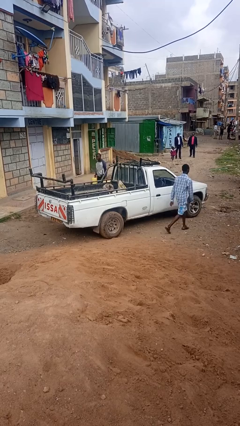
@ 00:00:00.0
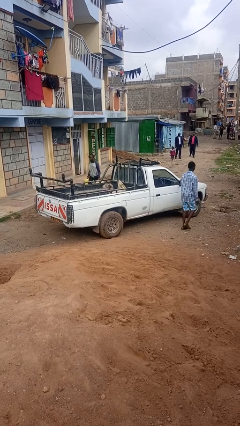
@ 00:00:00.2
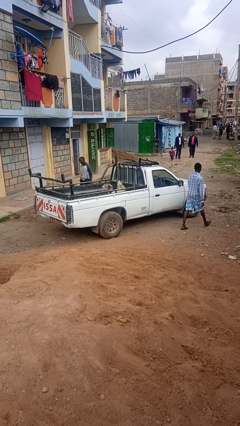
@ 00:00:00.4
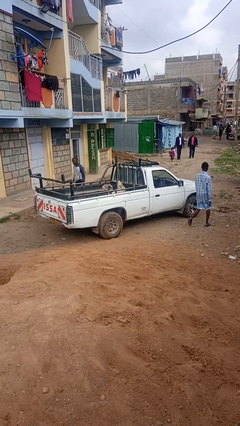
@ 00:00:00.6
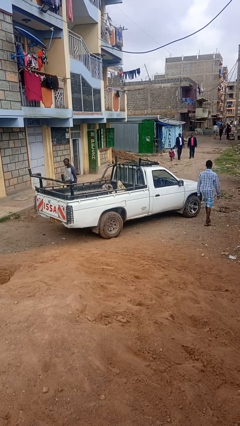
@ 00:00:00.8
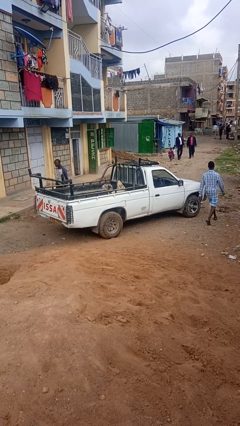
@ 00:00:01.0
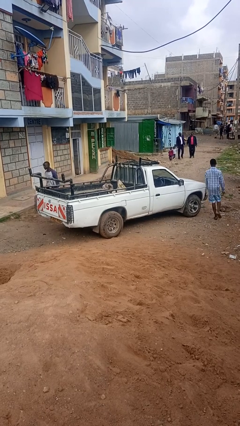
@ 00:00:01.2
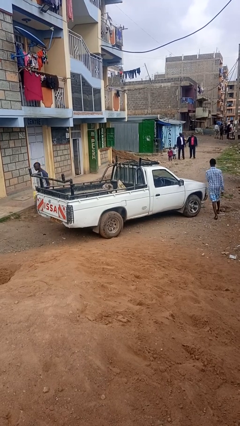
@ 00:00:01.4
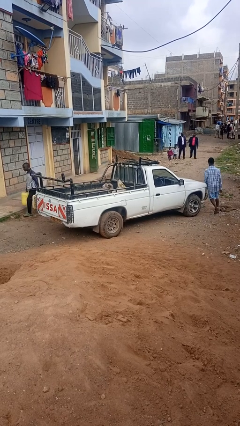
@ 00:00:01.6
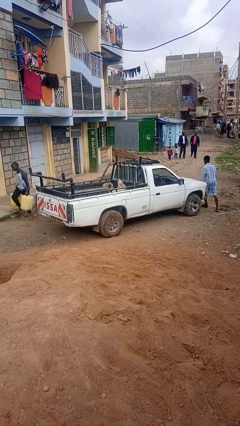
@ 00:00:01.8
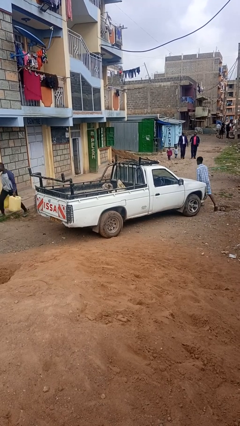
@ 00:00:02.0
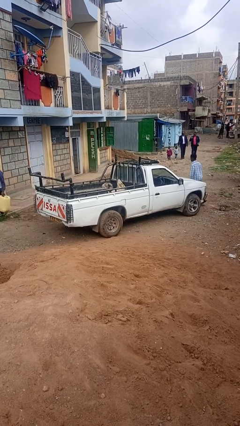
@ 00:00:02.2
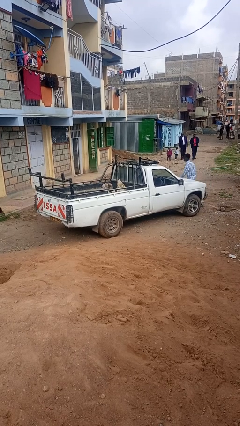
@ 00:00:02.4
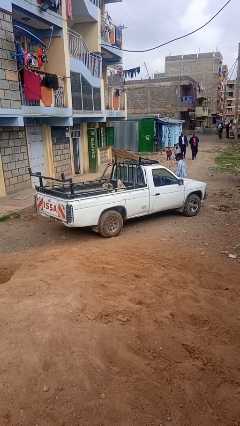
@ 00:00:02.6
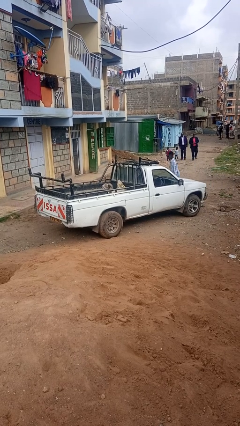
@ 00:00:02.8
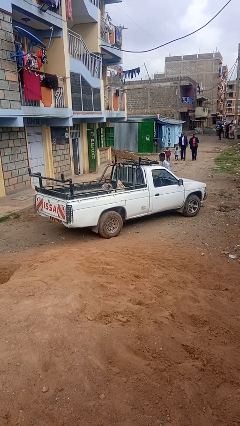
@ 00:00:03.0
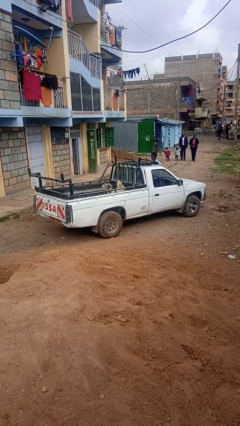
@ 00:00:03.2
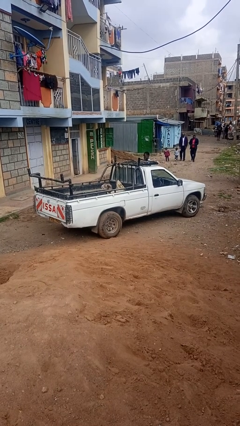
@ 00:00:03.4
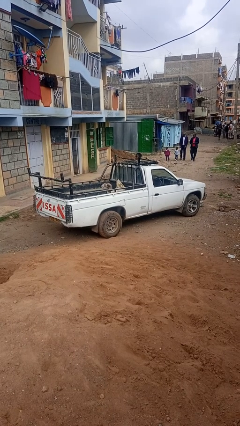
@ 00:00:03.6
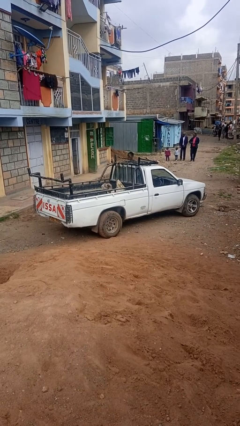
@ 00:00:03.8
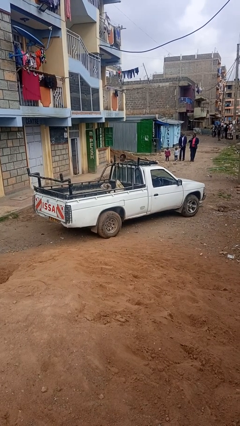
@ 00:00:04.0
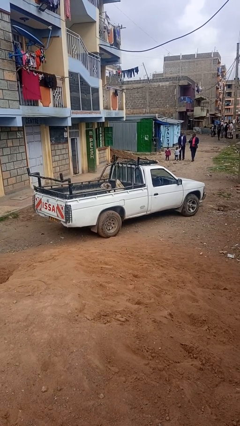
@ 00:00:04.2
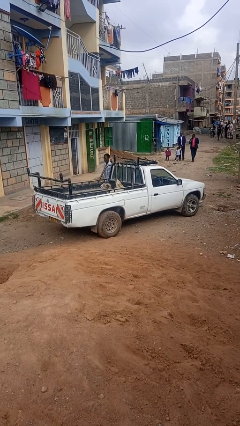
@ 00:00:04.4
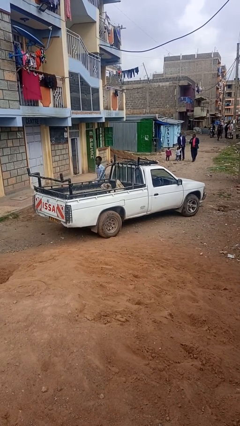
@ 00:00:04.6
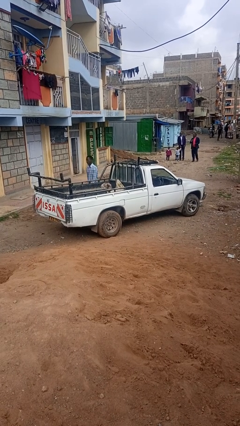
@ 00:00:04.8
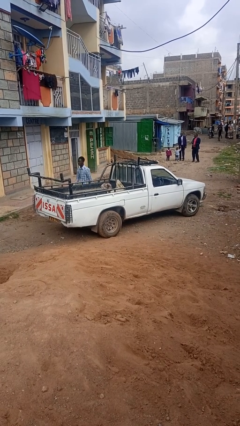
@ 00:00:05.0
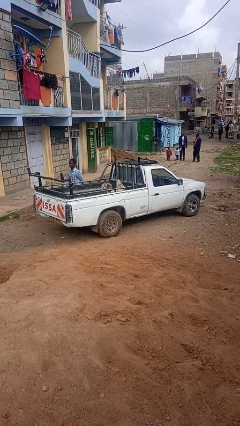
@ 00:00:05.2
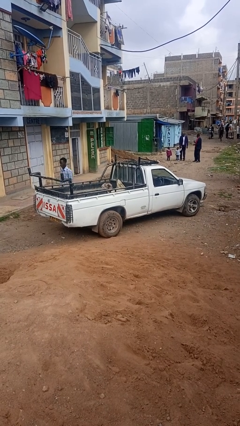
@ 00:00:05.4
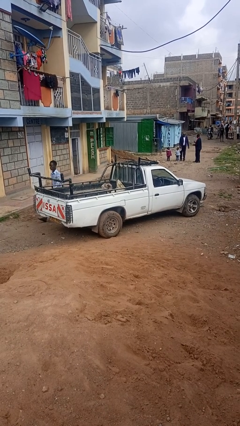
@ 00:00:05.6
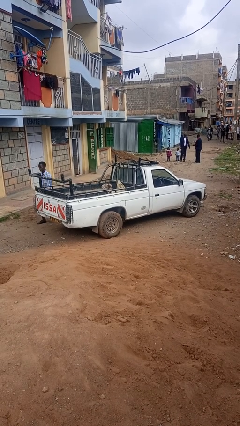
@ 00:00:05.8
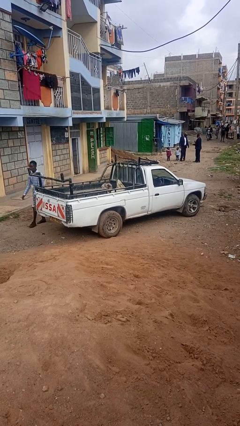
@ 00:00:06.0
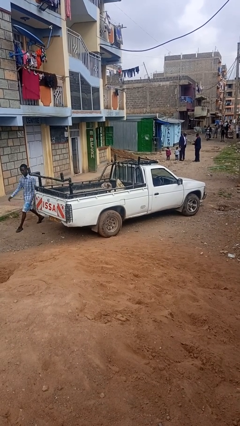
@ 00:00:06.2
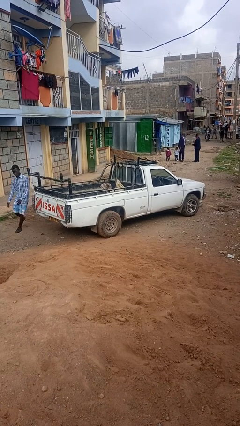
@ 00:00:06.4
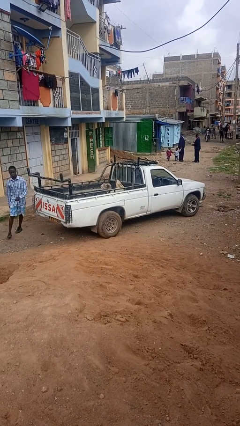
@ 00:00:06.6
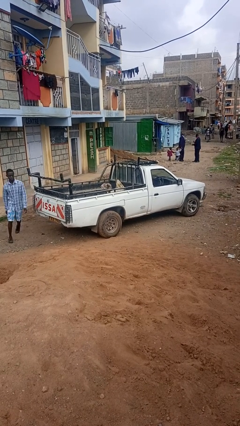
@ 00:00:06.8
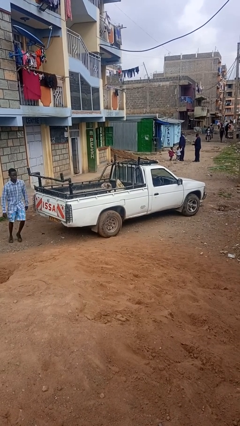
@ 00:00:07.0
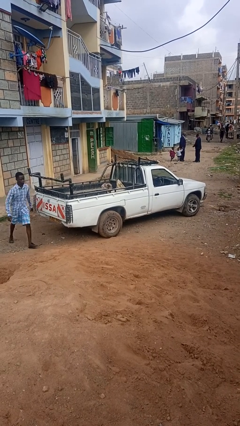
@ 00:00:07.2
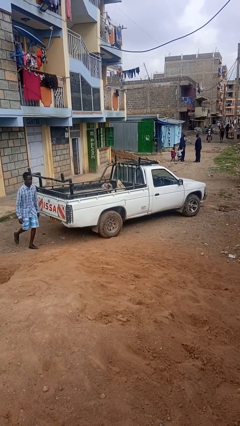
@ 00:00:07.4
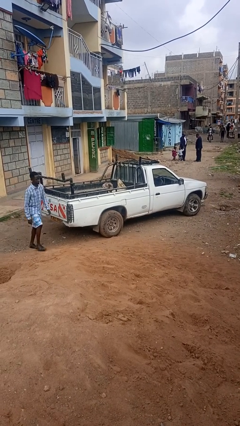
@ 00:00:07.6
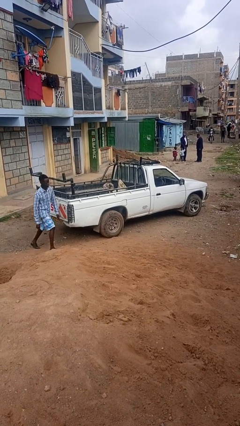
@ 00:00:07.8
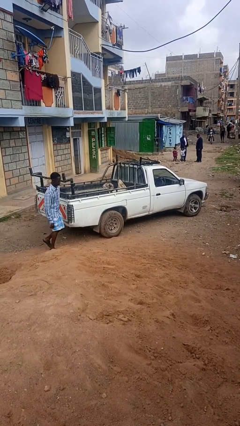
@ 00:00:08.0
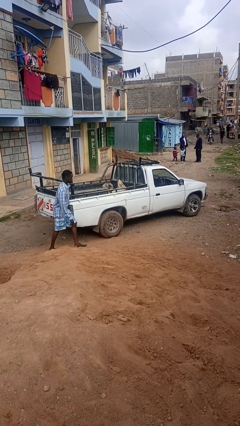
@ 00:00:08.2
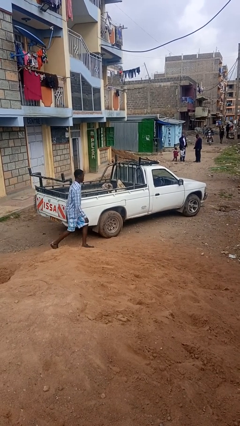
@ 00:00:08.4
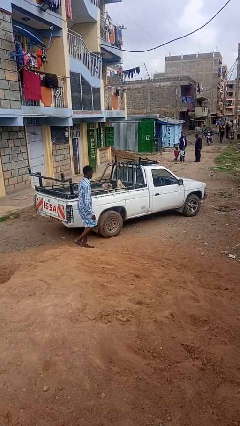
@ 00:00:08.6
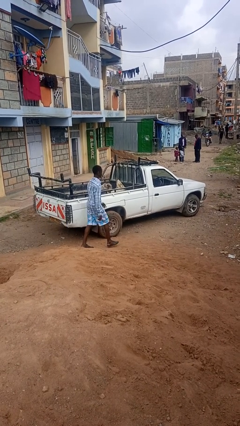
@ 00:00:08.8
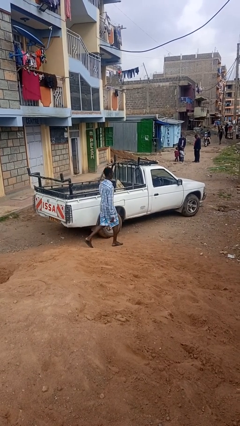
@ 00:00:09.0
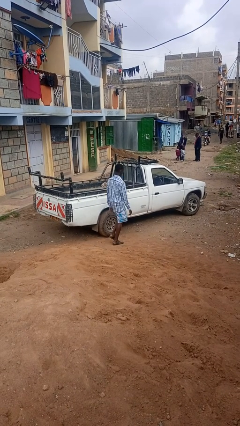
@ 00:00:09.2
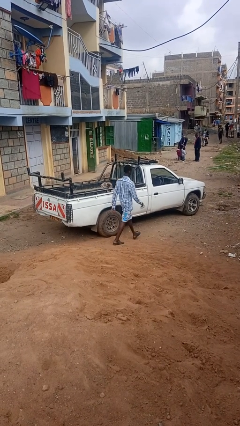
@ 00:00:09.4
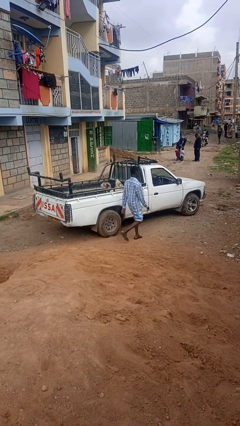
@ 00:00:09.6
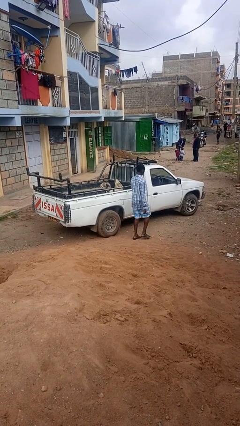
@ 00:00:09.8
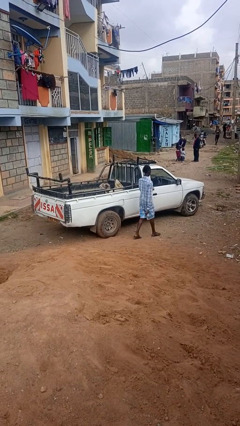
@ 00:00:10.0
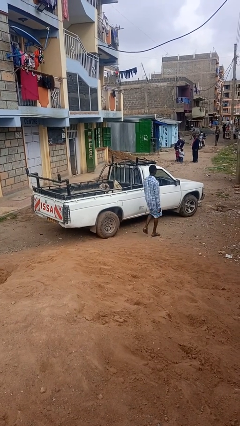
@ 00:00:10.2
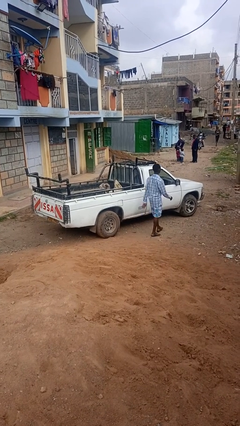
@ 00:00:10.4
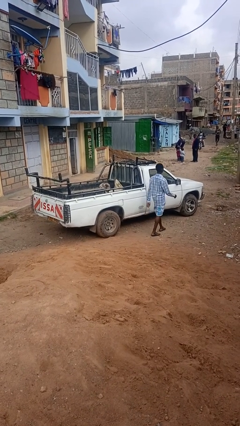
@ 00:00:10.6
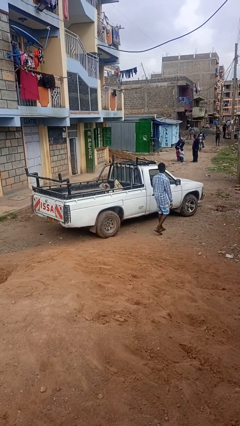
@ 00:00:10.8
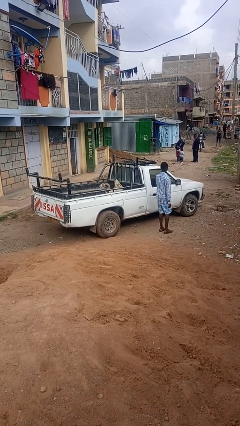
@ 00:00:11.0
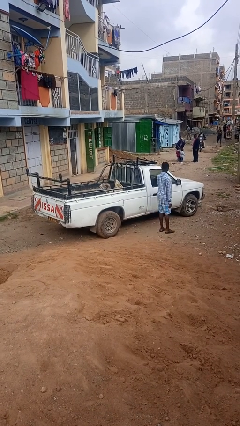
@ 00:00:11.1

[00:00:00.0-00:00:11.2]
person walks around car

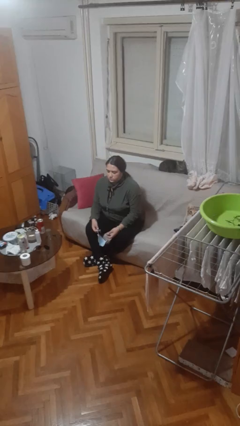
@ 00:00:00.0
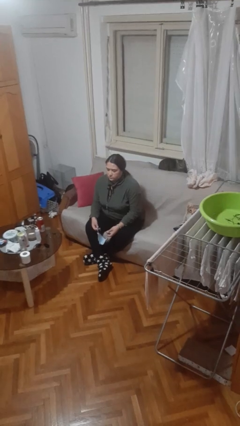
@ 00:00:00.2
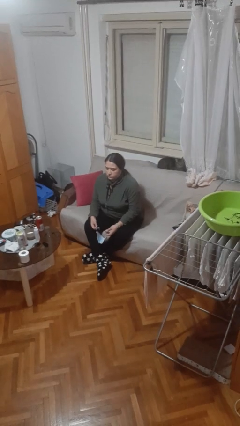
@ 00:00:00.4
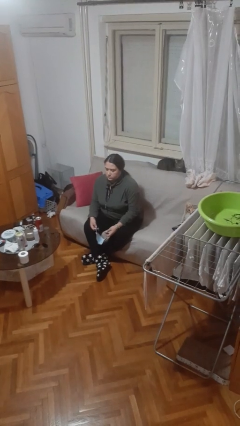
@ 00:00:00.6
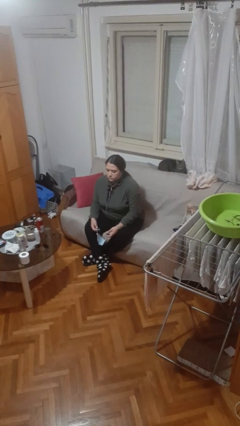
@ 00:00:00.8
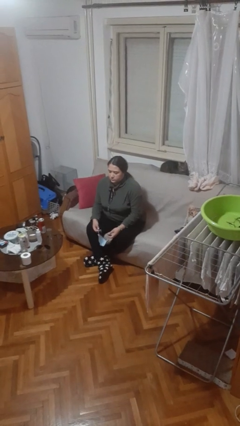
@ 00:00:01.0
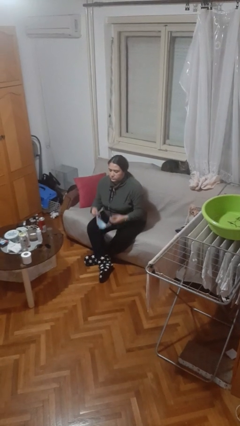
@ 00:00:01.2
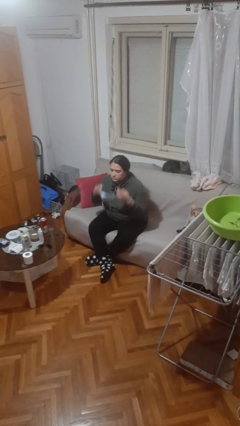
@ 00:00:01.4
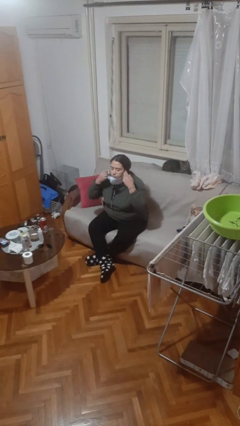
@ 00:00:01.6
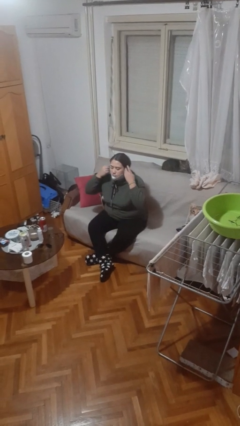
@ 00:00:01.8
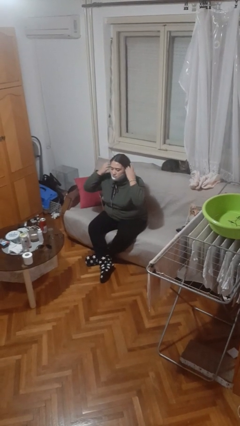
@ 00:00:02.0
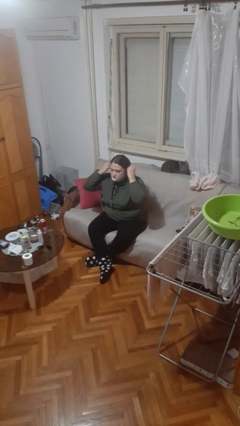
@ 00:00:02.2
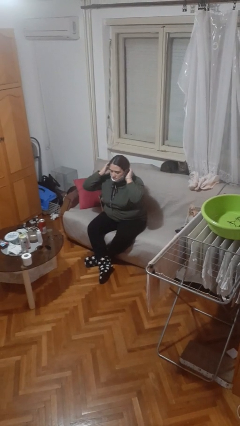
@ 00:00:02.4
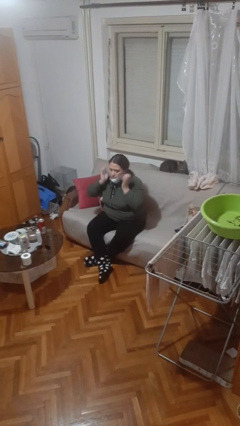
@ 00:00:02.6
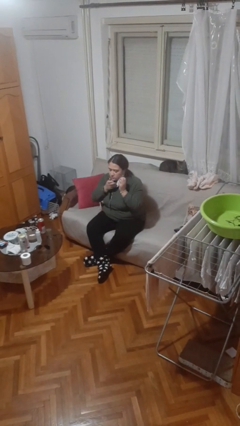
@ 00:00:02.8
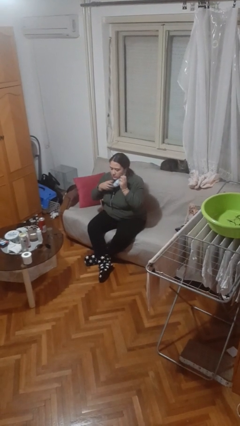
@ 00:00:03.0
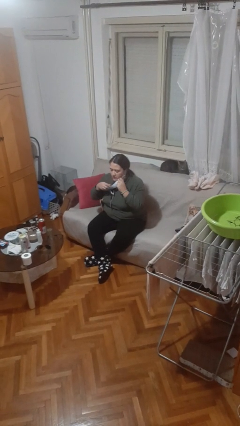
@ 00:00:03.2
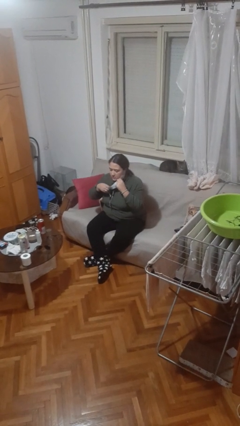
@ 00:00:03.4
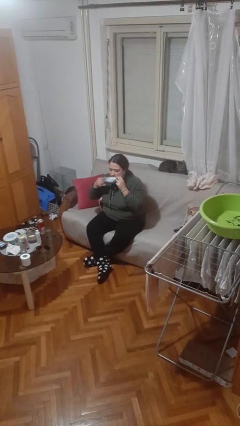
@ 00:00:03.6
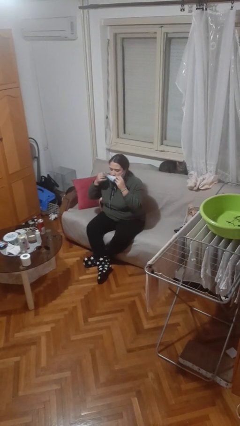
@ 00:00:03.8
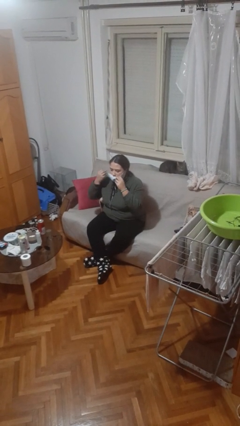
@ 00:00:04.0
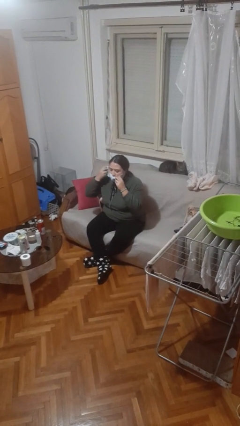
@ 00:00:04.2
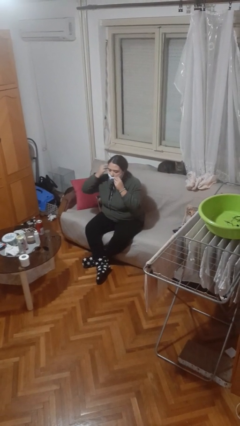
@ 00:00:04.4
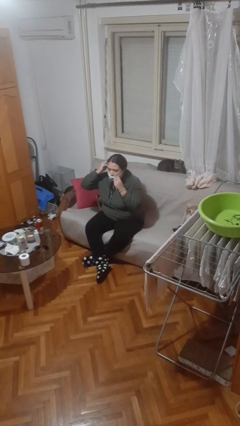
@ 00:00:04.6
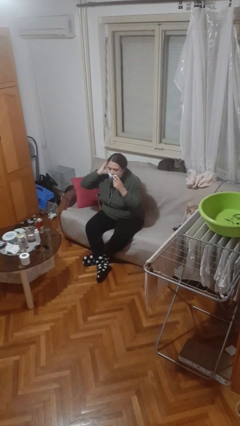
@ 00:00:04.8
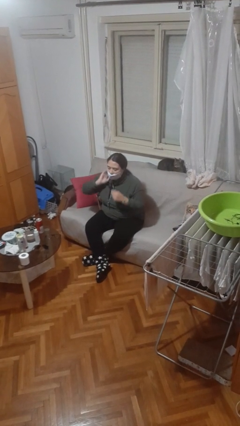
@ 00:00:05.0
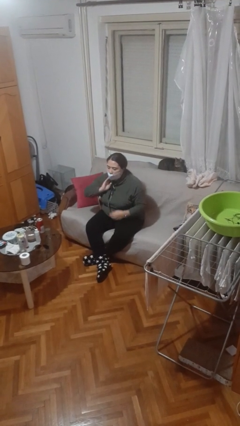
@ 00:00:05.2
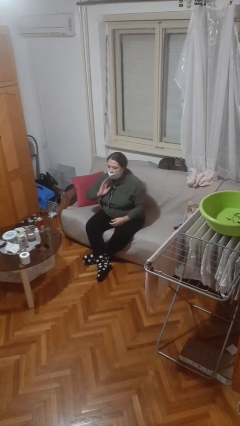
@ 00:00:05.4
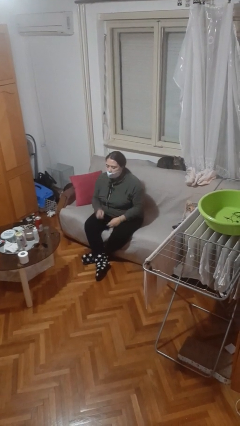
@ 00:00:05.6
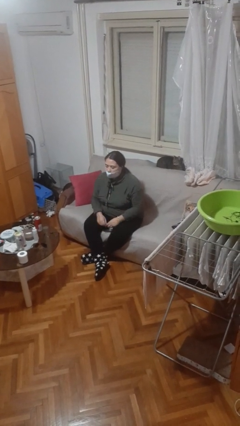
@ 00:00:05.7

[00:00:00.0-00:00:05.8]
person puts on facemask

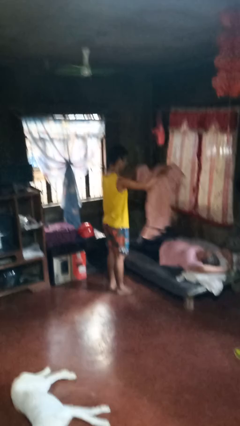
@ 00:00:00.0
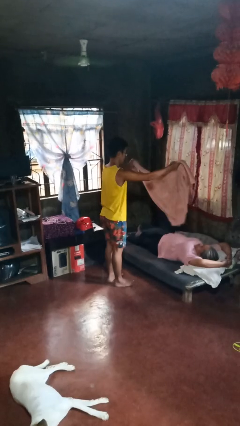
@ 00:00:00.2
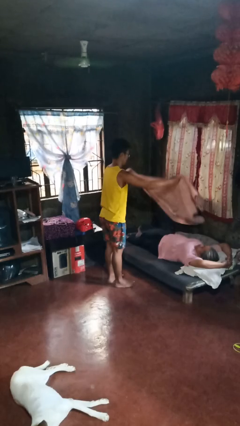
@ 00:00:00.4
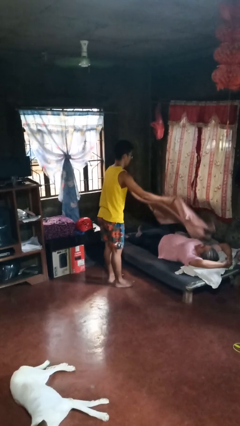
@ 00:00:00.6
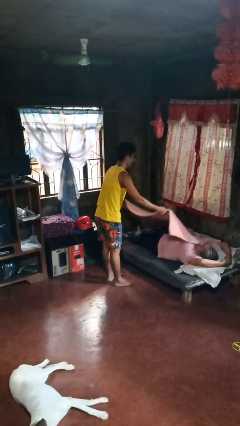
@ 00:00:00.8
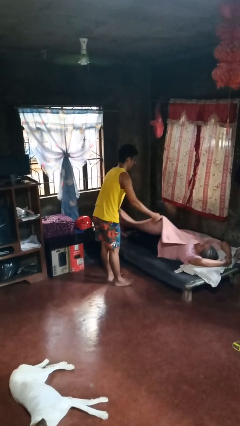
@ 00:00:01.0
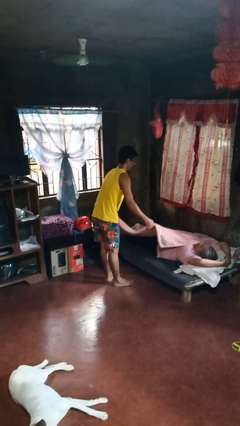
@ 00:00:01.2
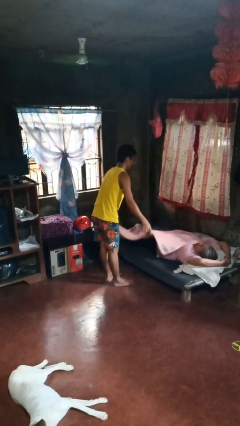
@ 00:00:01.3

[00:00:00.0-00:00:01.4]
person covers friend with blanket
